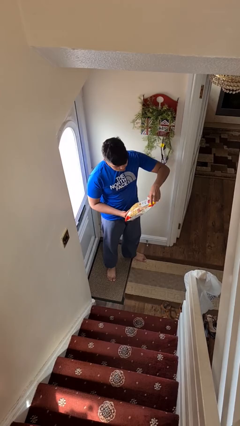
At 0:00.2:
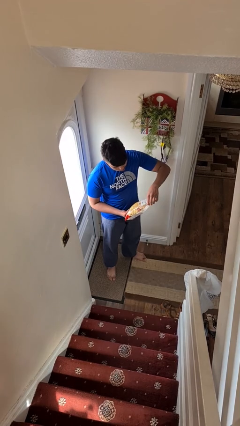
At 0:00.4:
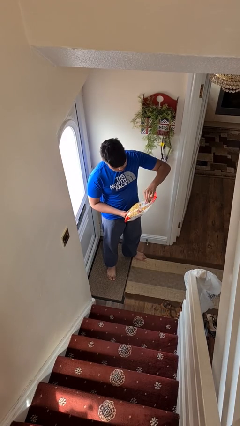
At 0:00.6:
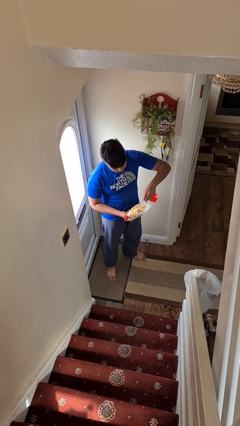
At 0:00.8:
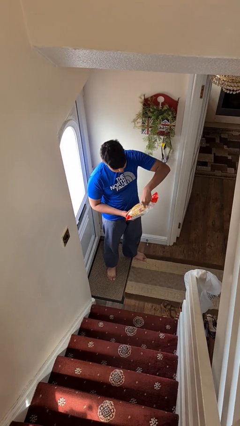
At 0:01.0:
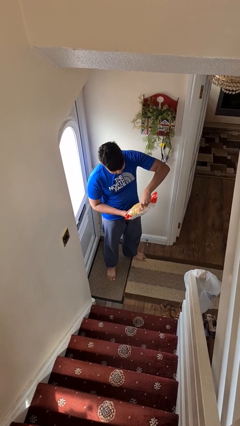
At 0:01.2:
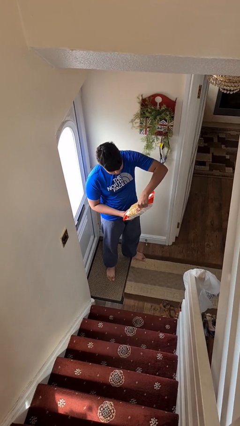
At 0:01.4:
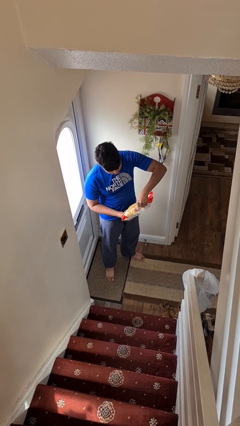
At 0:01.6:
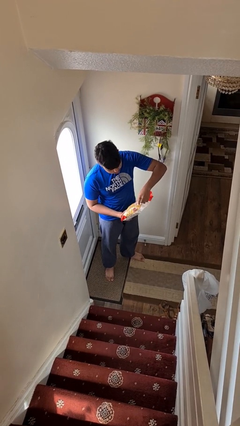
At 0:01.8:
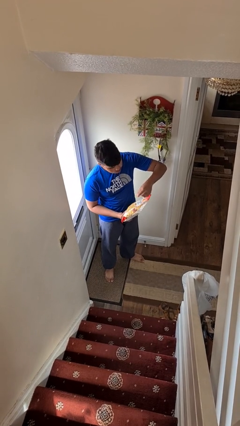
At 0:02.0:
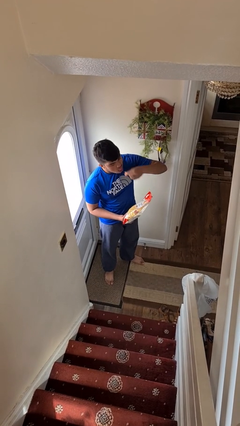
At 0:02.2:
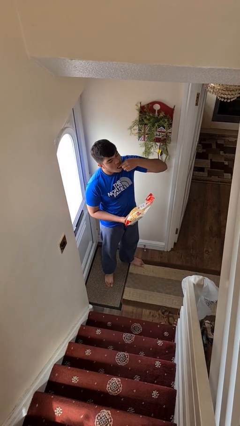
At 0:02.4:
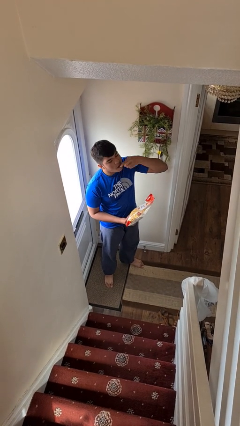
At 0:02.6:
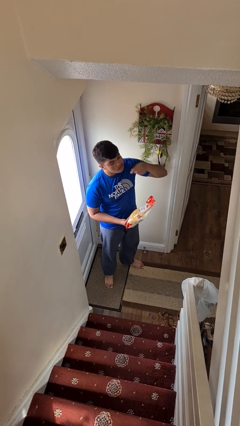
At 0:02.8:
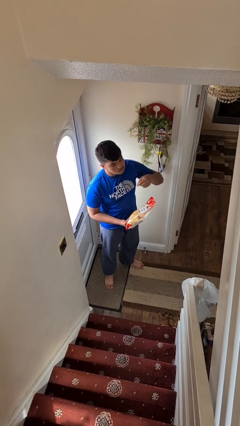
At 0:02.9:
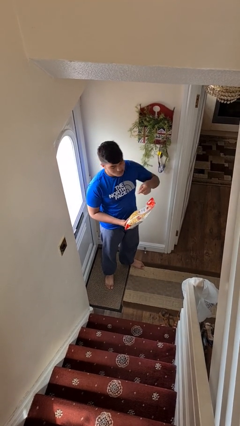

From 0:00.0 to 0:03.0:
person eats snack from bag

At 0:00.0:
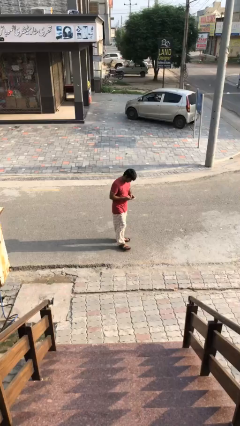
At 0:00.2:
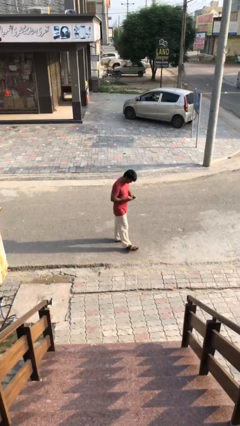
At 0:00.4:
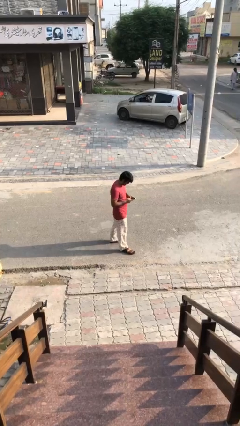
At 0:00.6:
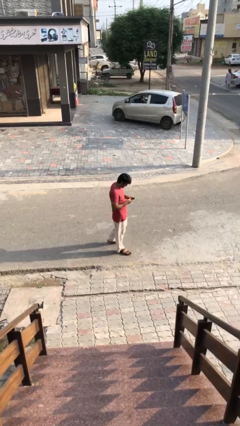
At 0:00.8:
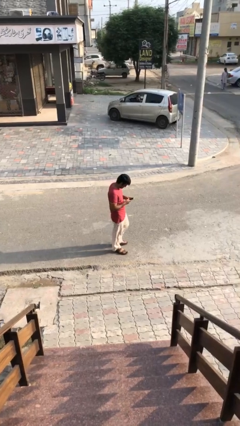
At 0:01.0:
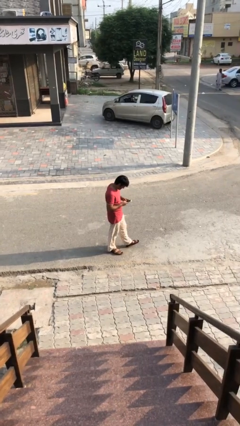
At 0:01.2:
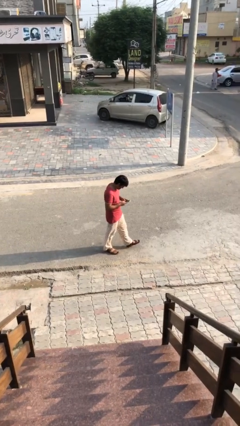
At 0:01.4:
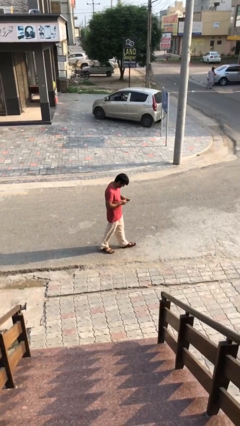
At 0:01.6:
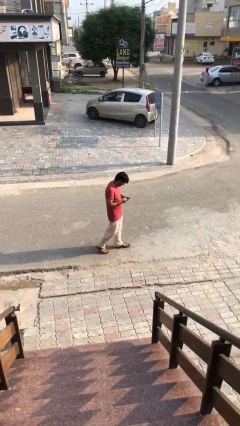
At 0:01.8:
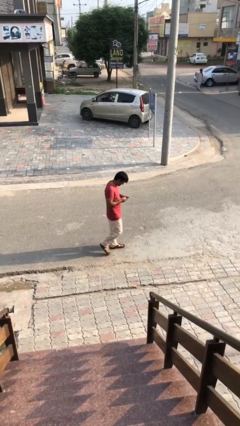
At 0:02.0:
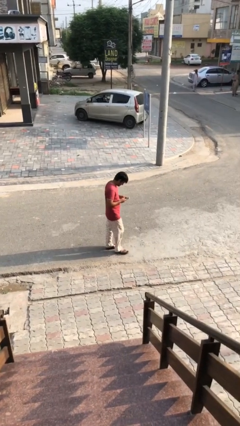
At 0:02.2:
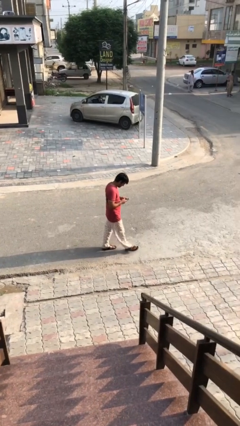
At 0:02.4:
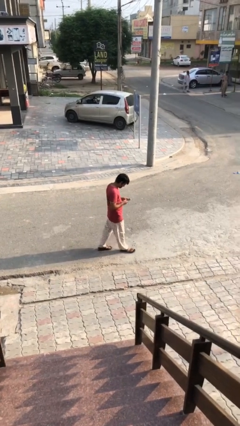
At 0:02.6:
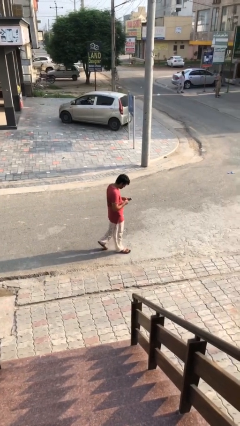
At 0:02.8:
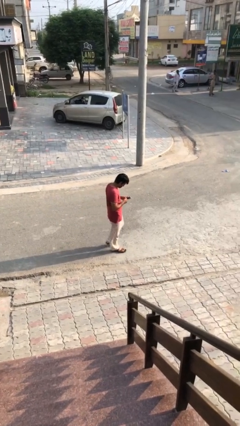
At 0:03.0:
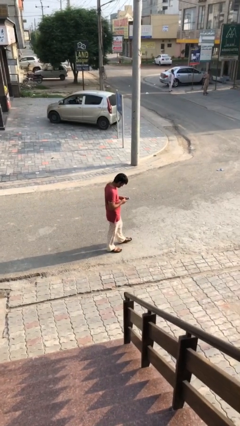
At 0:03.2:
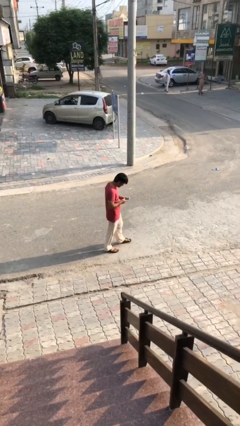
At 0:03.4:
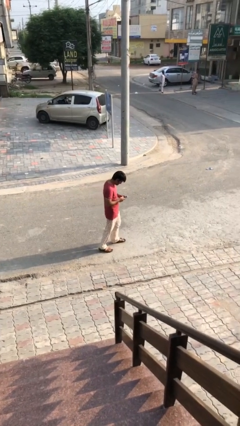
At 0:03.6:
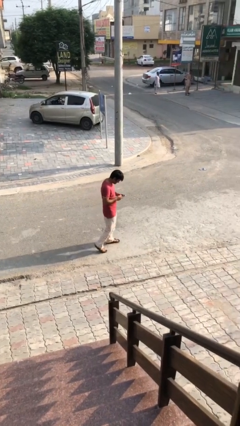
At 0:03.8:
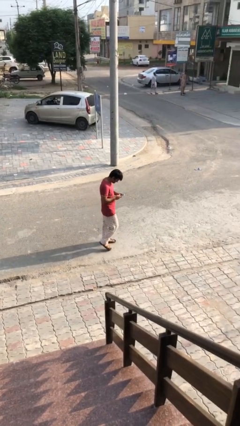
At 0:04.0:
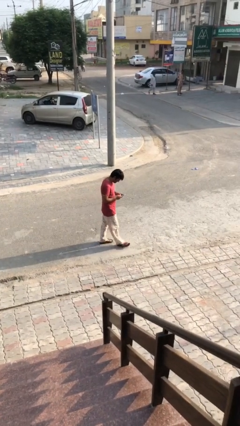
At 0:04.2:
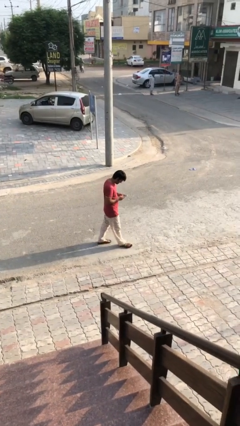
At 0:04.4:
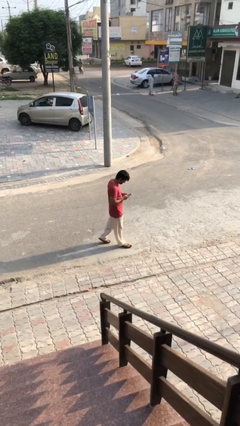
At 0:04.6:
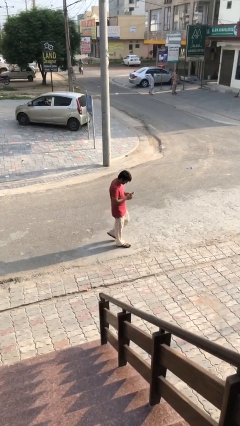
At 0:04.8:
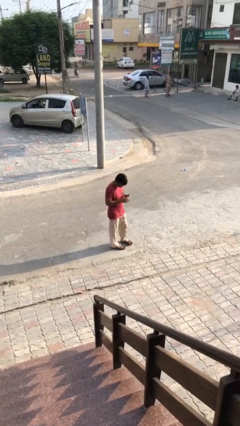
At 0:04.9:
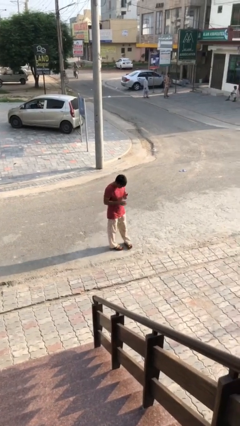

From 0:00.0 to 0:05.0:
person texts on phone

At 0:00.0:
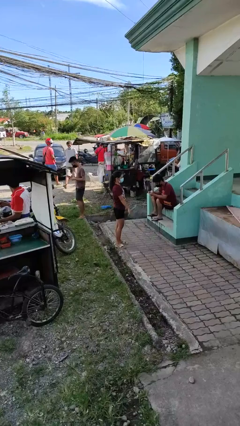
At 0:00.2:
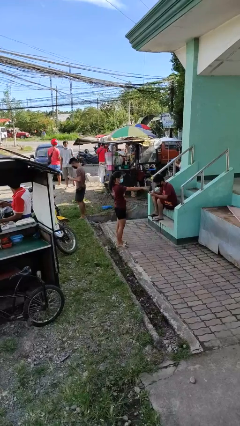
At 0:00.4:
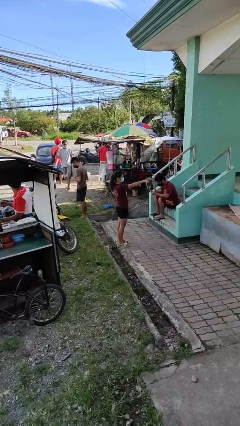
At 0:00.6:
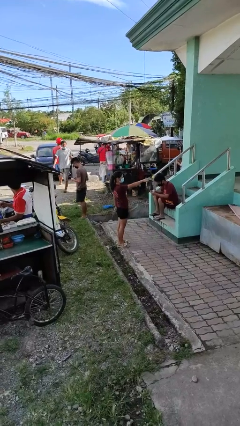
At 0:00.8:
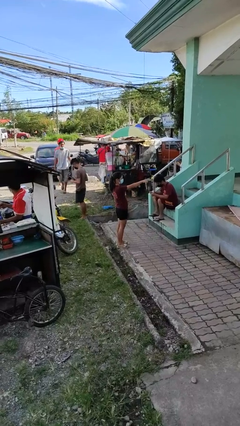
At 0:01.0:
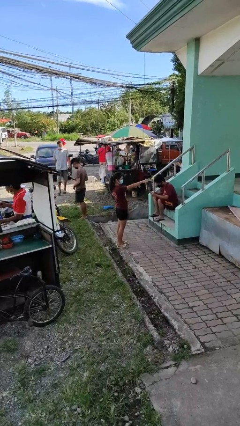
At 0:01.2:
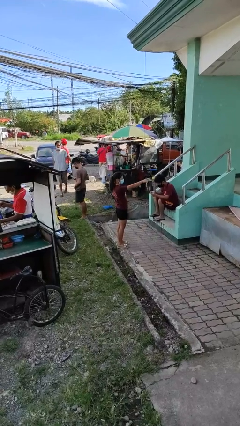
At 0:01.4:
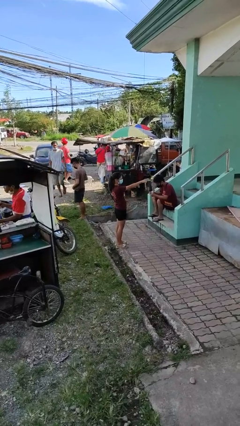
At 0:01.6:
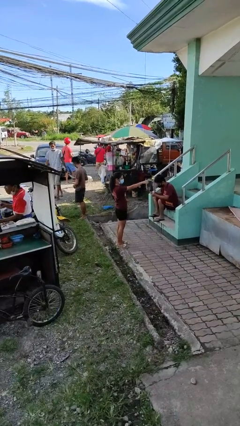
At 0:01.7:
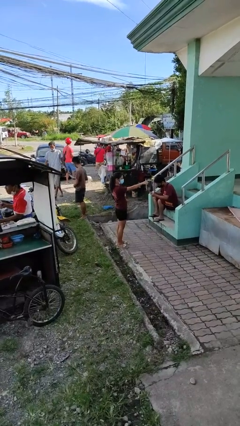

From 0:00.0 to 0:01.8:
person points at person

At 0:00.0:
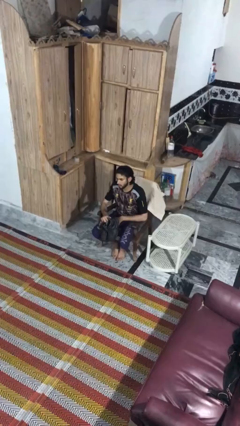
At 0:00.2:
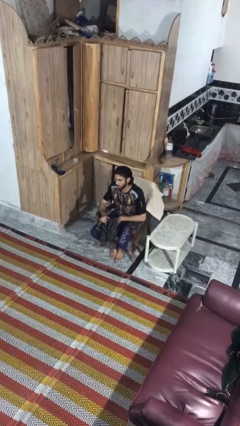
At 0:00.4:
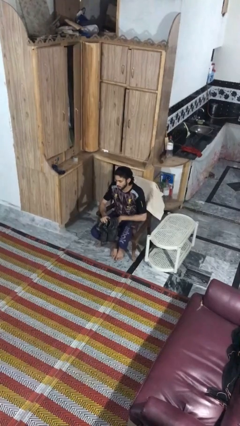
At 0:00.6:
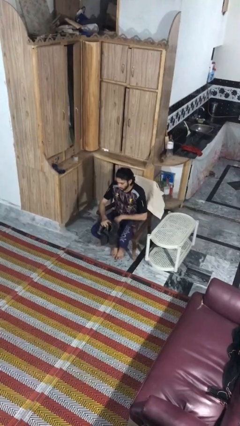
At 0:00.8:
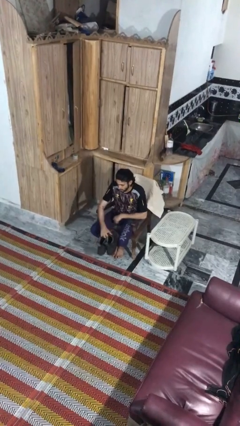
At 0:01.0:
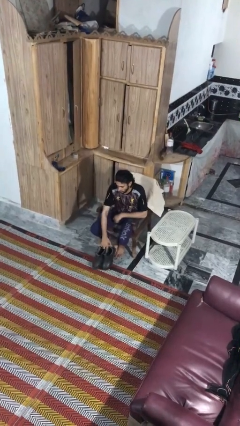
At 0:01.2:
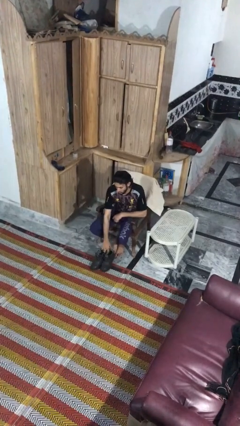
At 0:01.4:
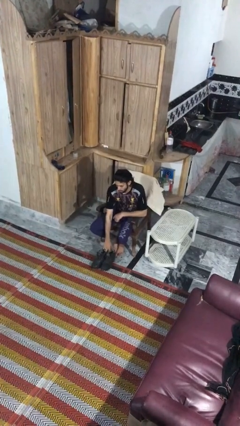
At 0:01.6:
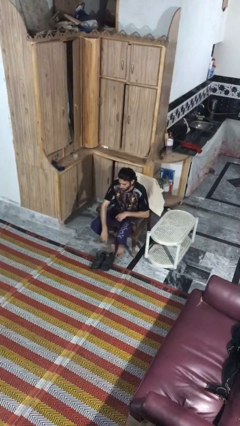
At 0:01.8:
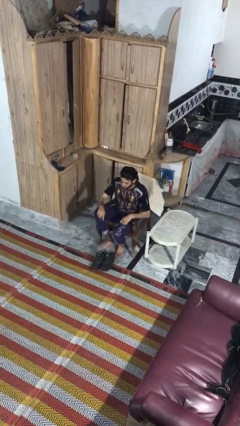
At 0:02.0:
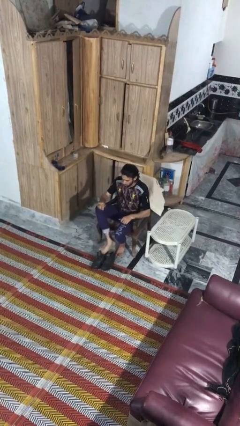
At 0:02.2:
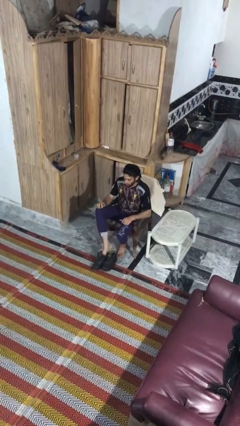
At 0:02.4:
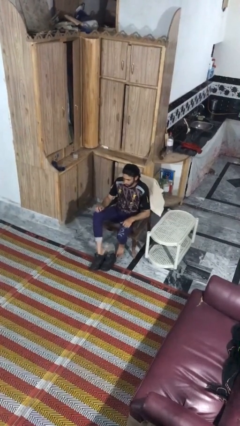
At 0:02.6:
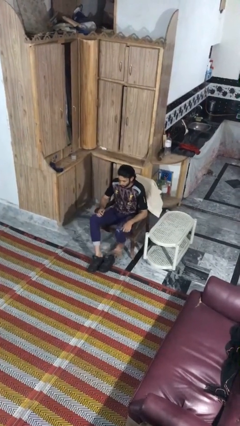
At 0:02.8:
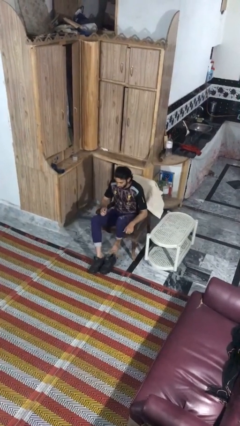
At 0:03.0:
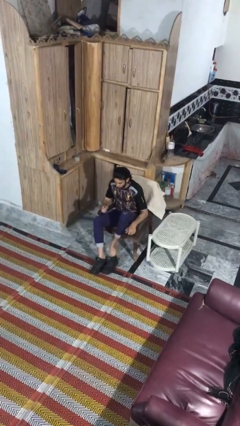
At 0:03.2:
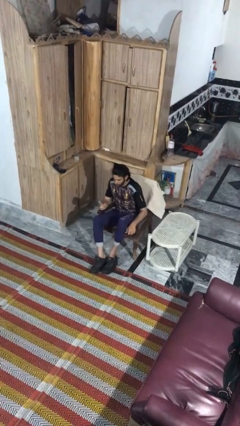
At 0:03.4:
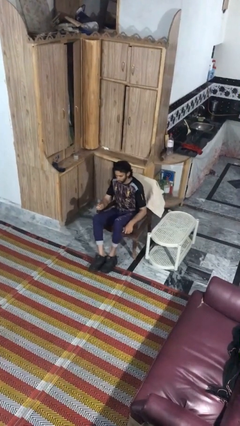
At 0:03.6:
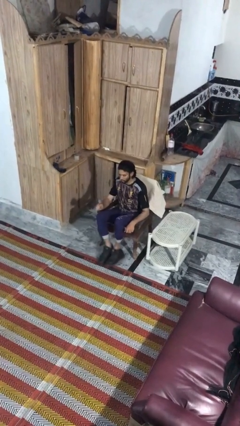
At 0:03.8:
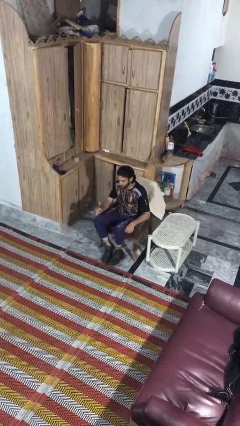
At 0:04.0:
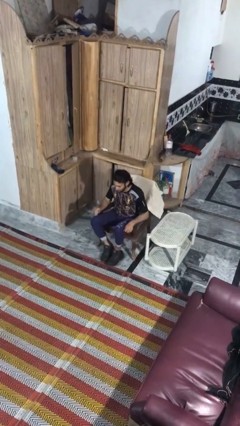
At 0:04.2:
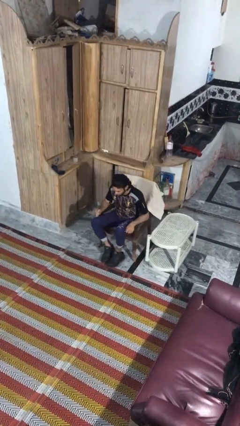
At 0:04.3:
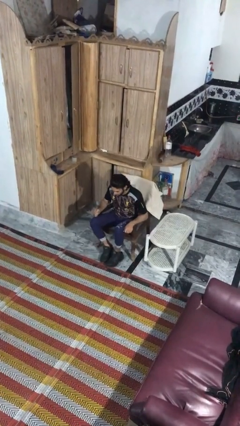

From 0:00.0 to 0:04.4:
person puts on boots

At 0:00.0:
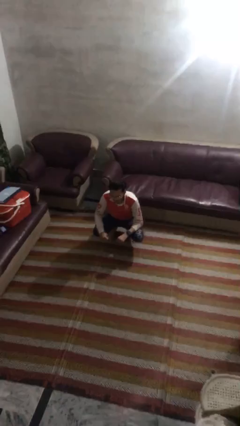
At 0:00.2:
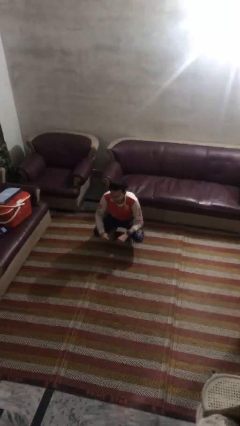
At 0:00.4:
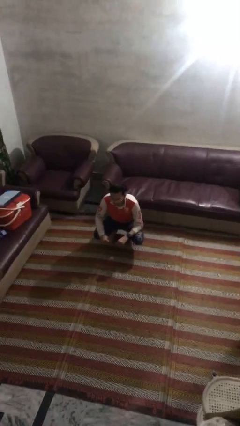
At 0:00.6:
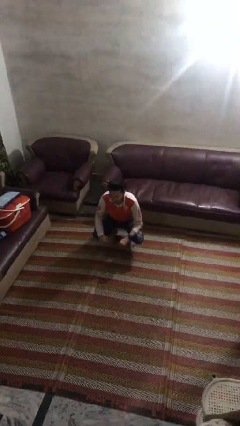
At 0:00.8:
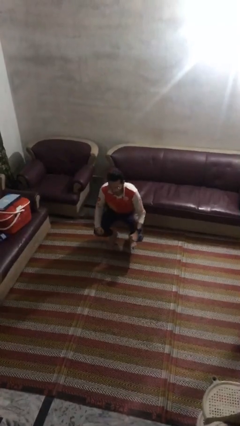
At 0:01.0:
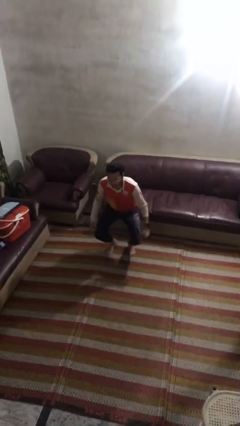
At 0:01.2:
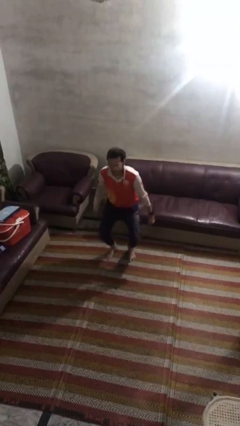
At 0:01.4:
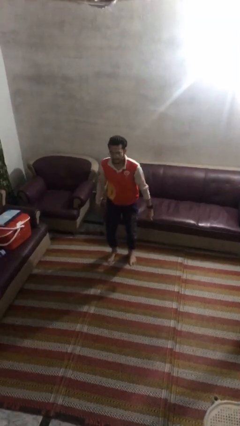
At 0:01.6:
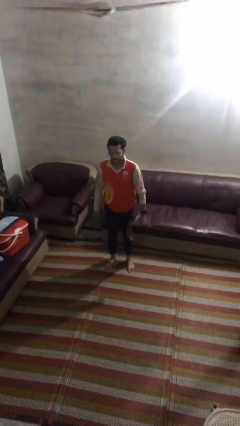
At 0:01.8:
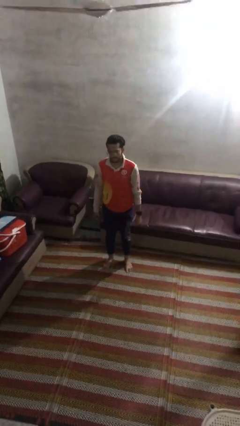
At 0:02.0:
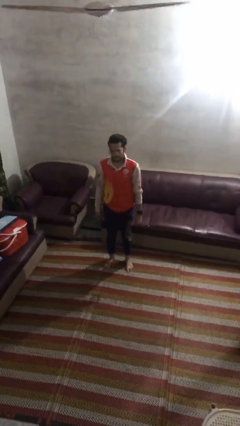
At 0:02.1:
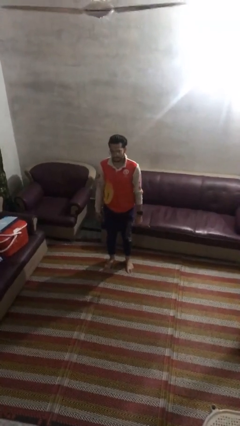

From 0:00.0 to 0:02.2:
person stands up

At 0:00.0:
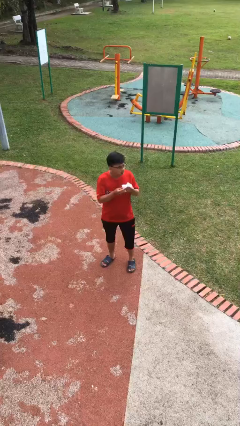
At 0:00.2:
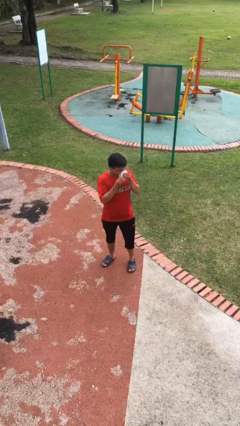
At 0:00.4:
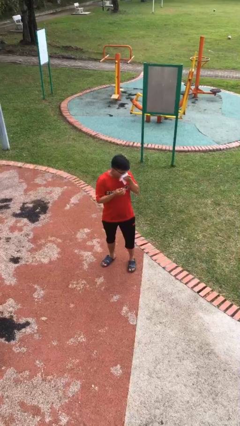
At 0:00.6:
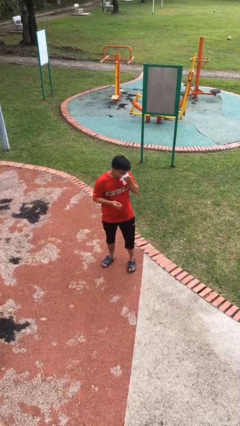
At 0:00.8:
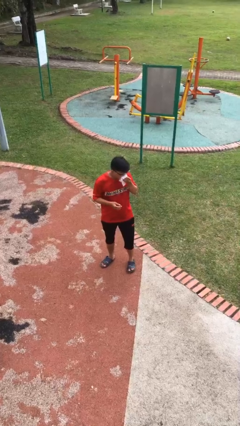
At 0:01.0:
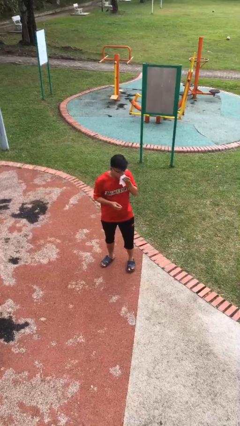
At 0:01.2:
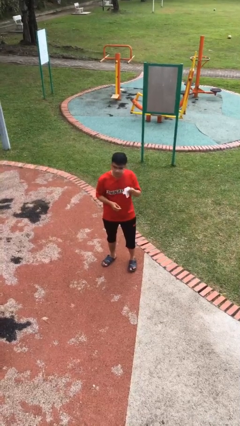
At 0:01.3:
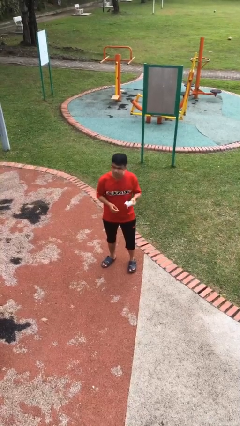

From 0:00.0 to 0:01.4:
person blows nose
